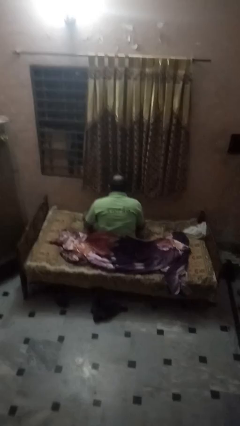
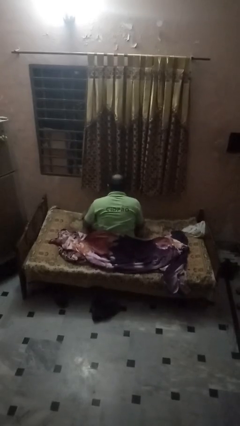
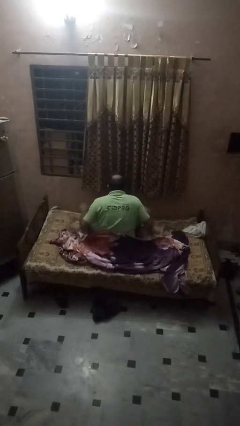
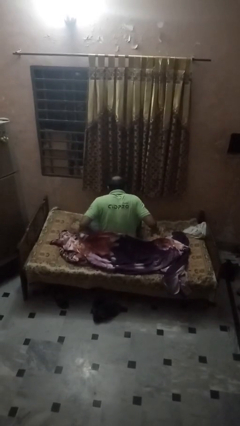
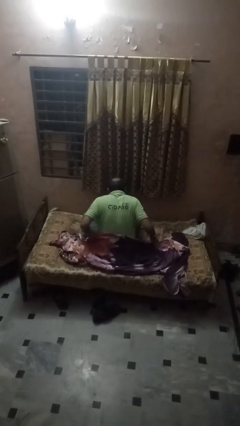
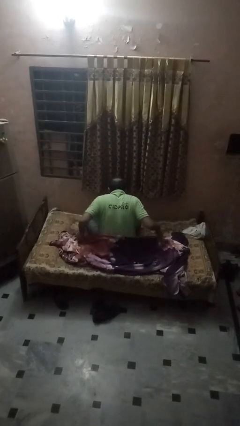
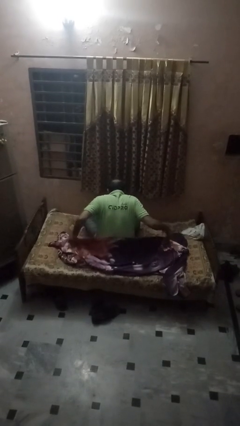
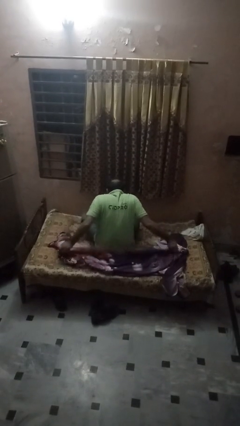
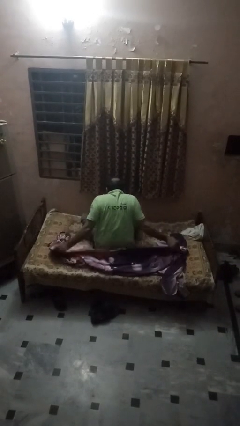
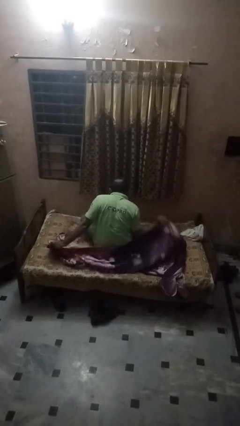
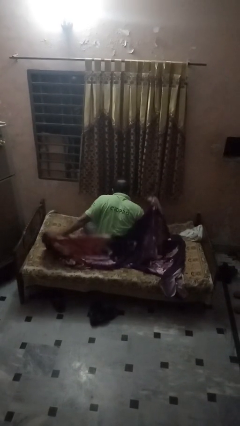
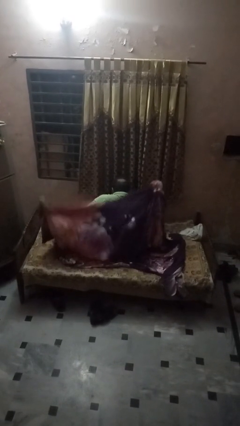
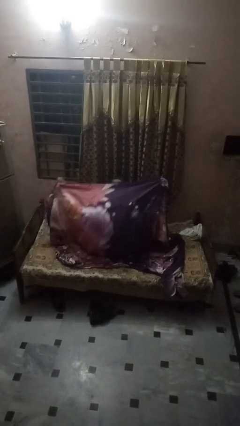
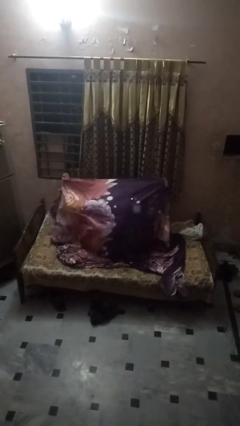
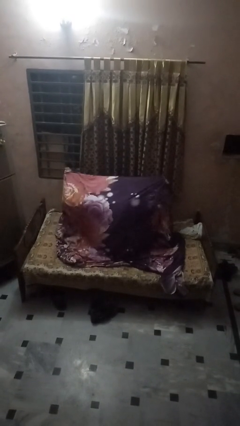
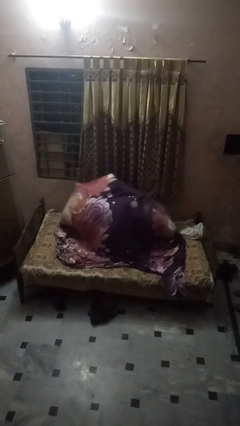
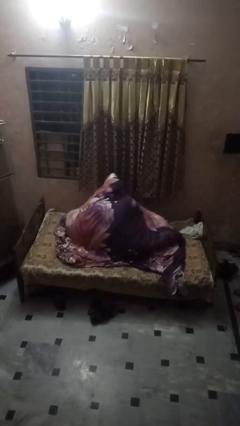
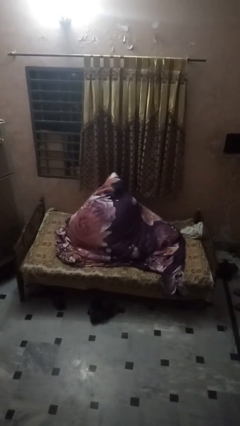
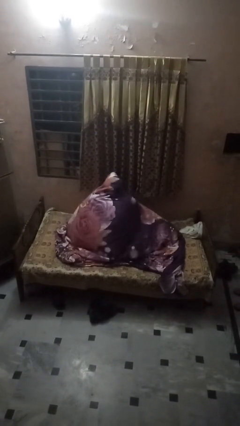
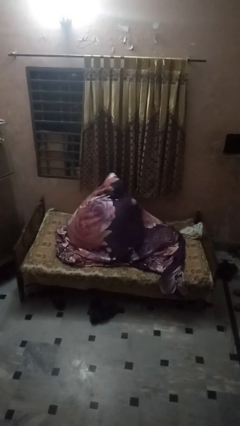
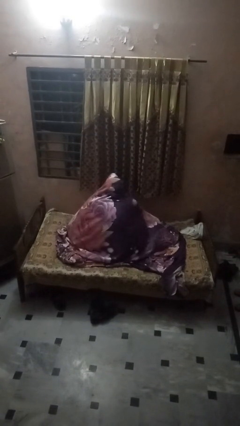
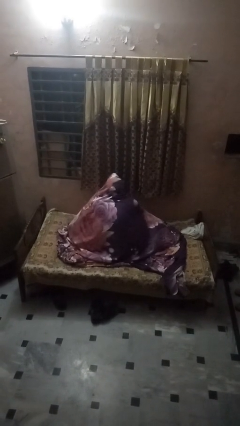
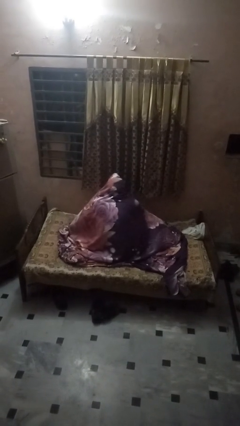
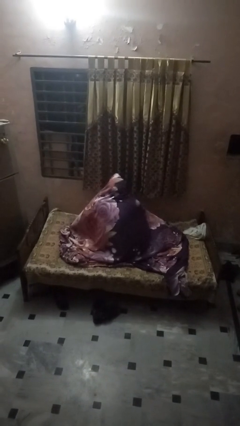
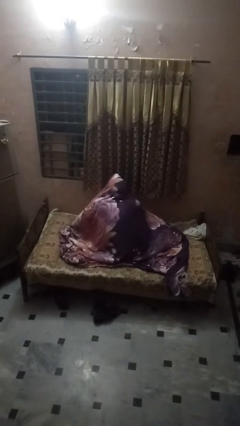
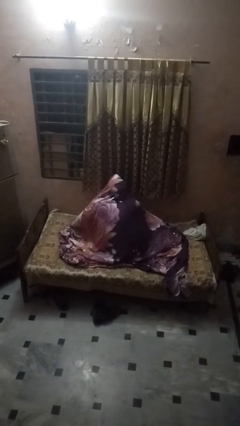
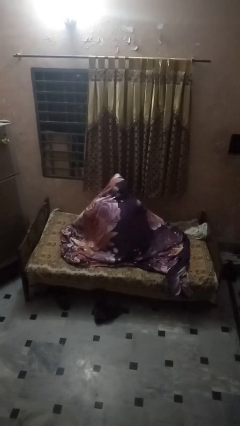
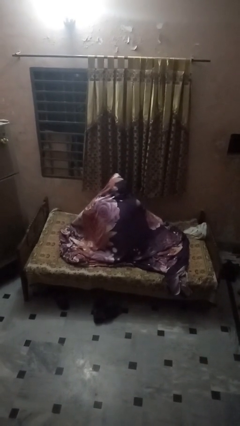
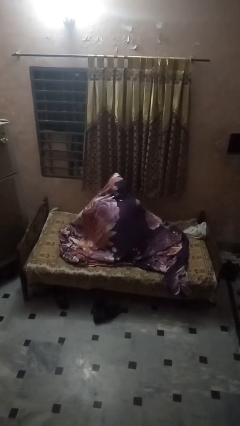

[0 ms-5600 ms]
person covers with bedsheets

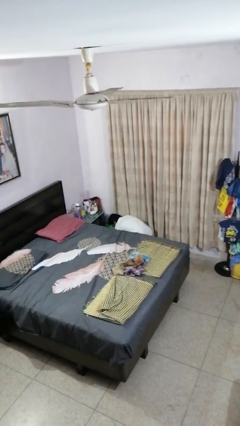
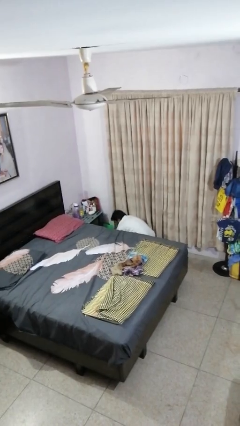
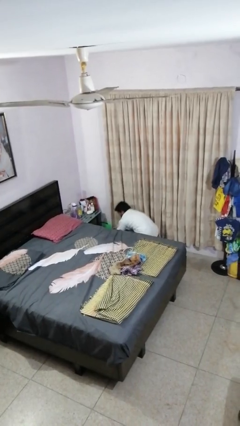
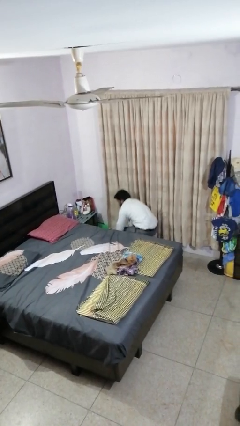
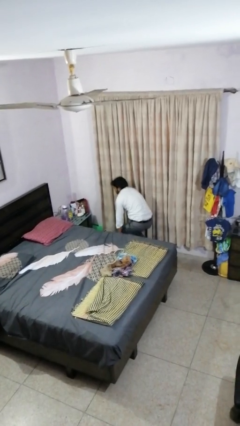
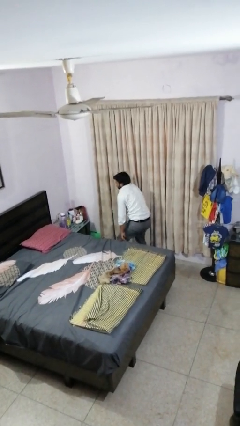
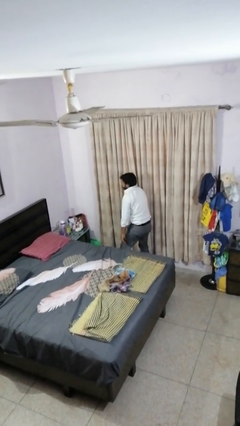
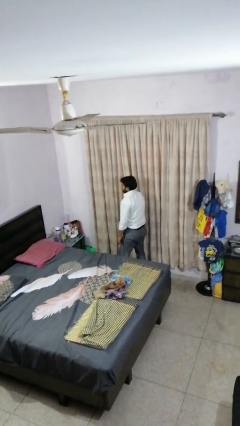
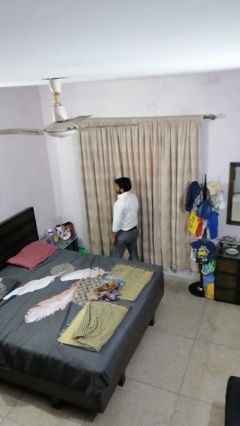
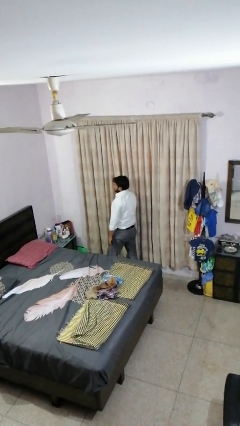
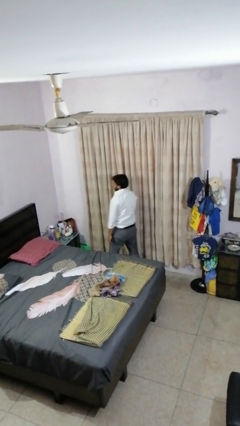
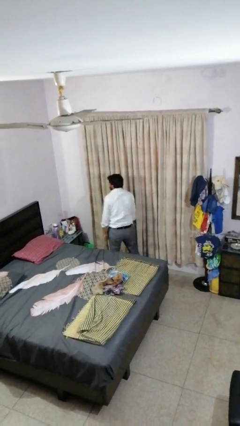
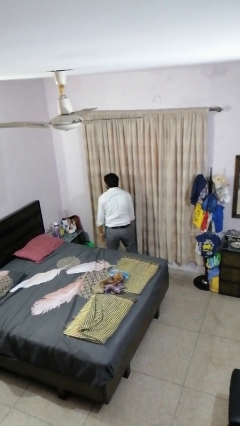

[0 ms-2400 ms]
person stands up from floor

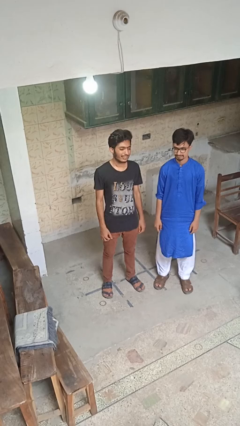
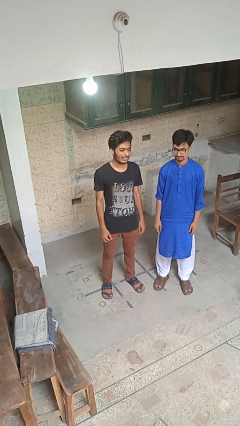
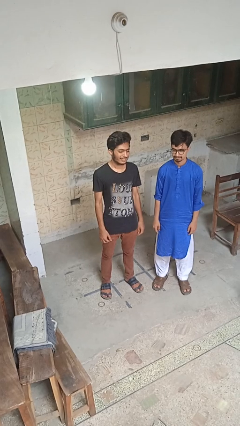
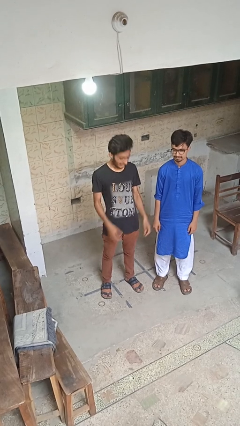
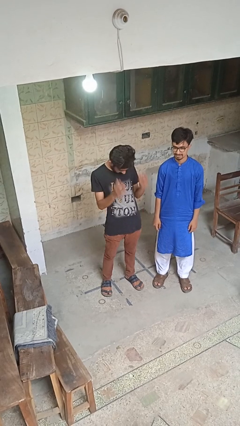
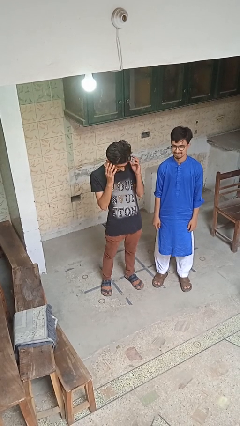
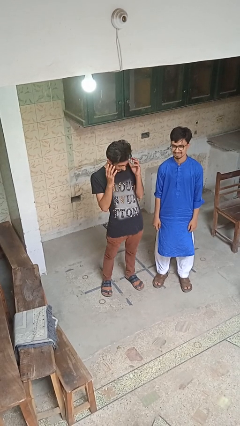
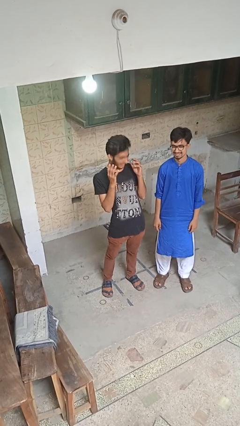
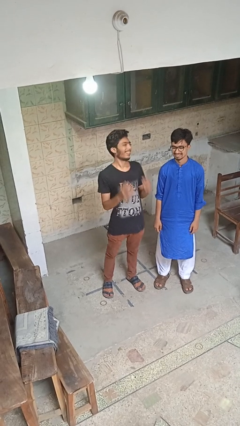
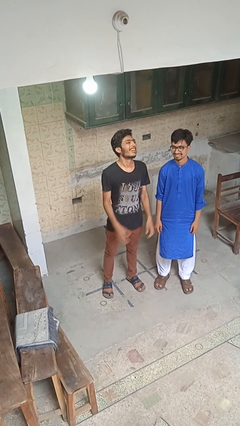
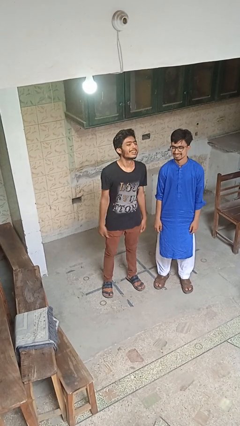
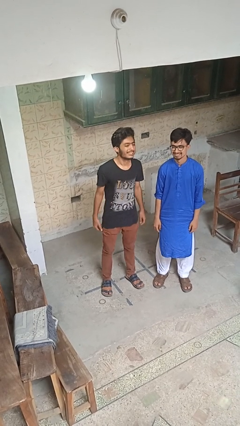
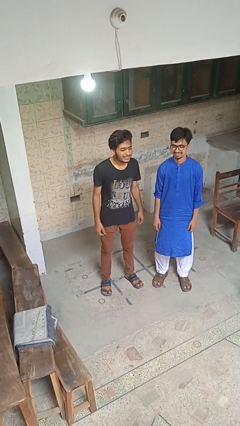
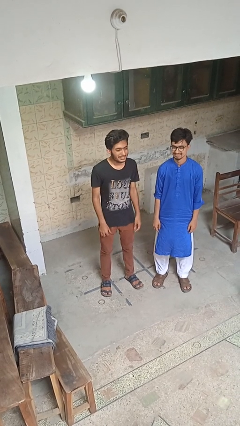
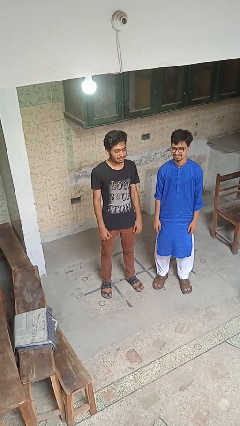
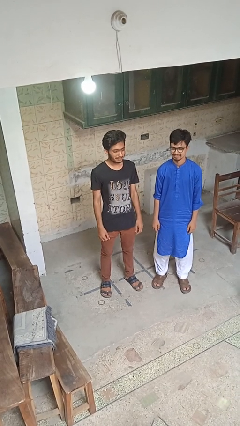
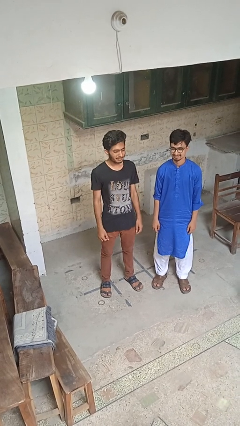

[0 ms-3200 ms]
person laughs with person

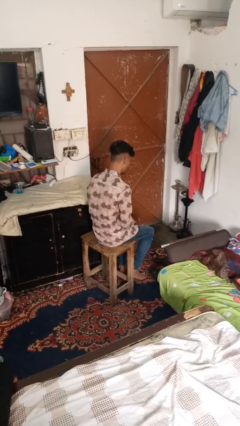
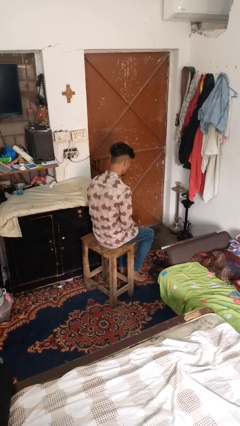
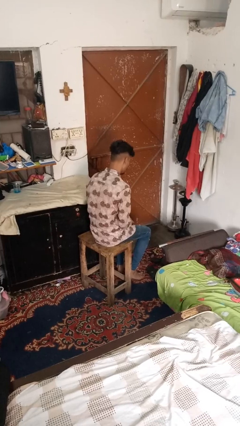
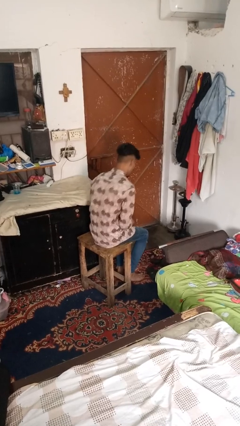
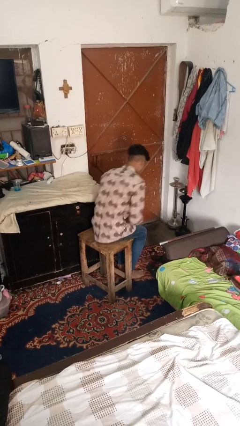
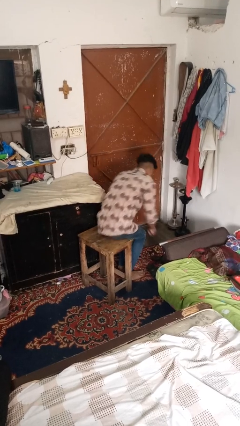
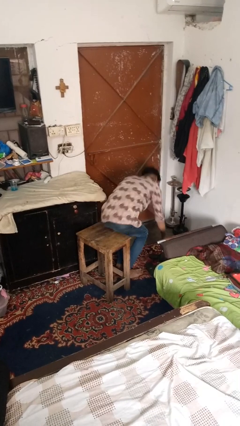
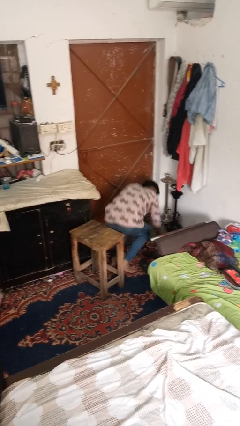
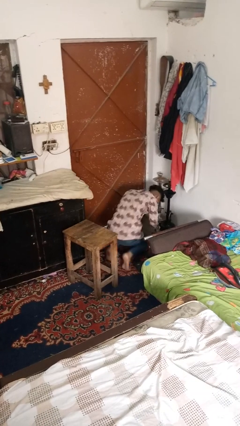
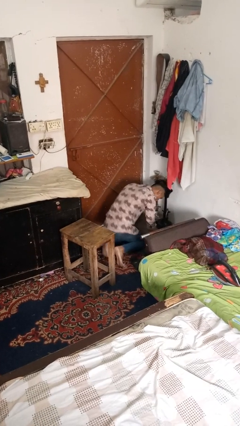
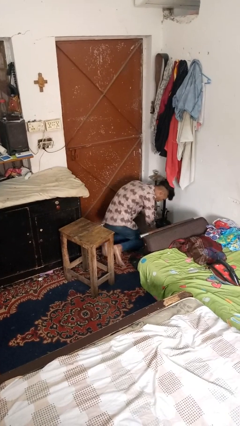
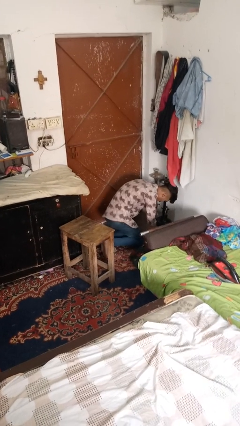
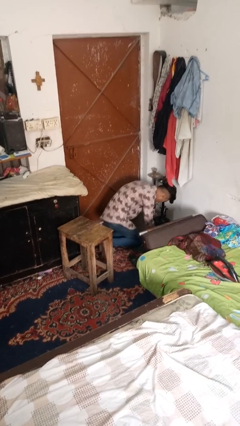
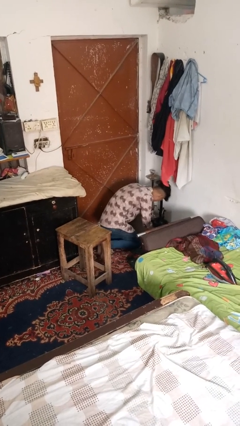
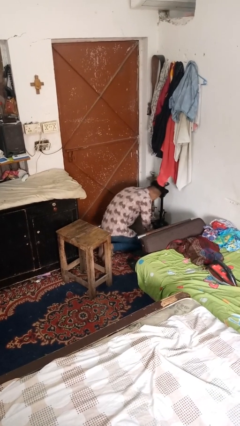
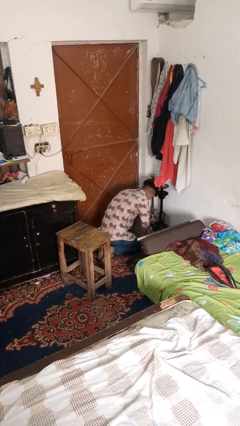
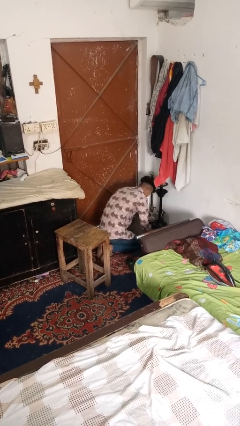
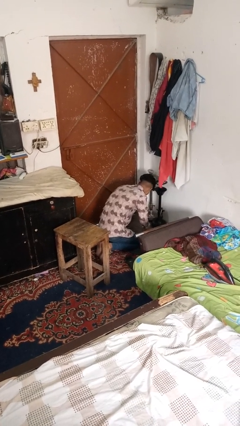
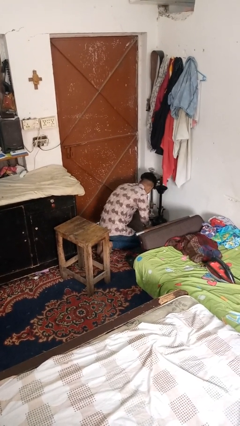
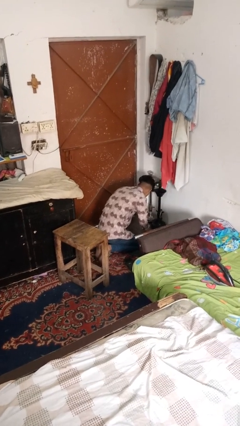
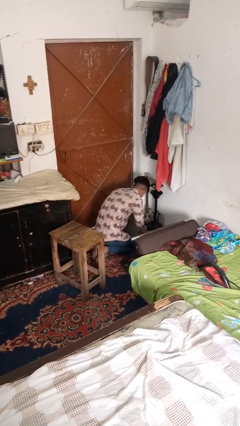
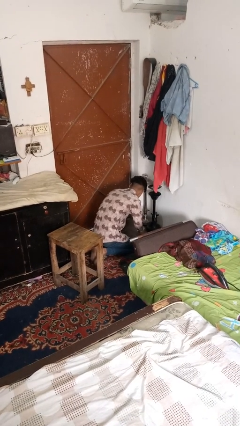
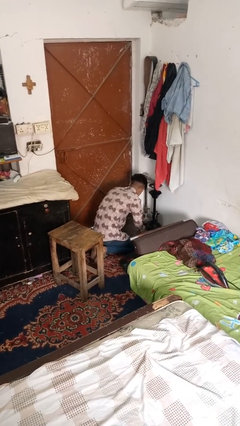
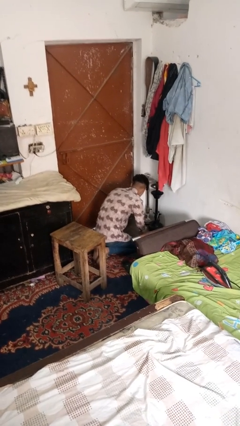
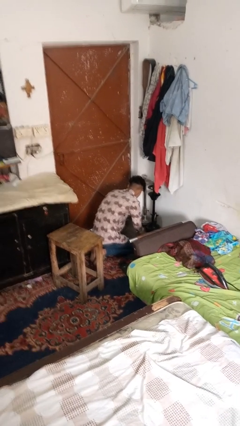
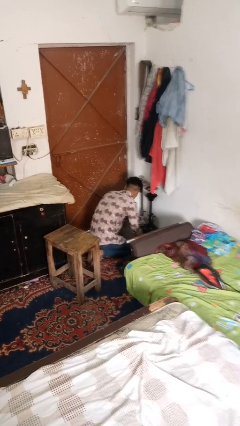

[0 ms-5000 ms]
person falls from chair

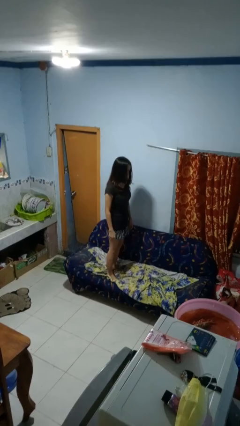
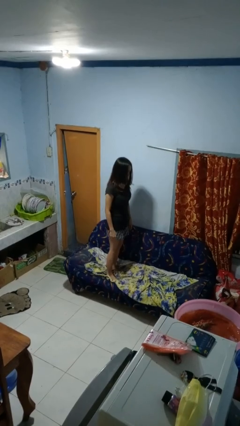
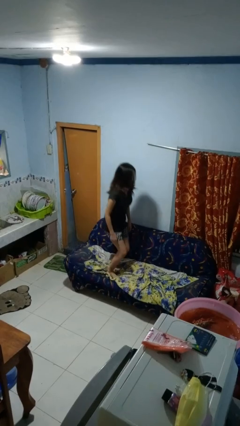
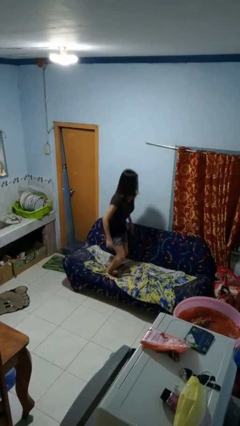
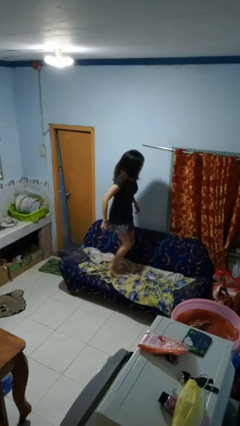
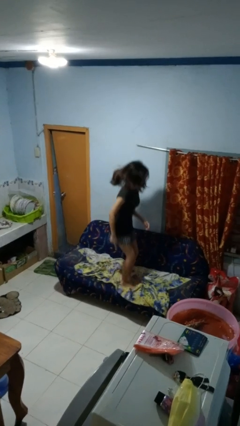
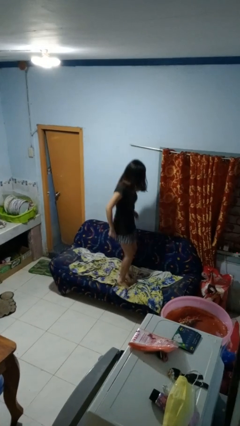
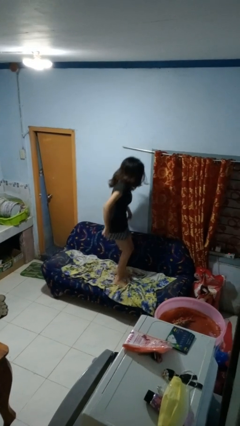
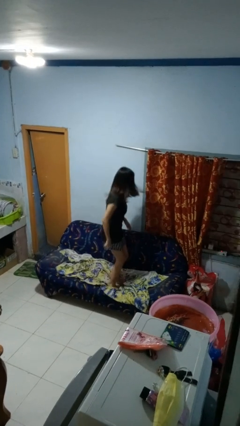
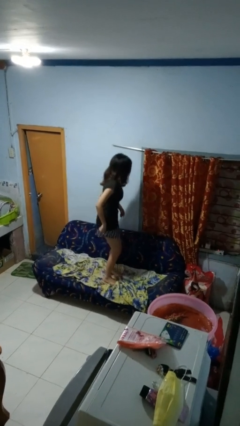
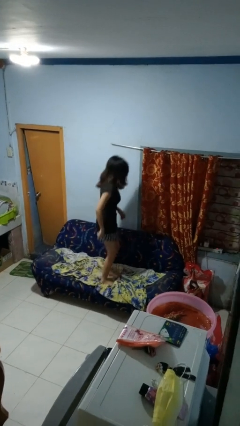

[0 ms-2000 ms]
person jumps on couch
